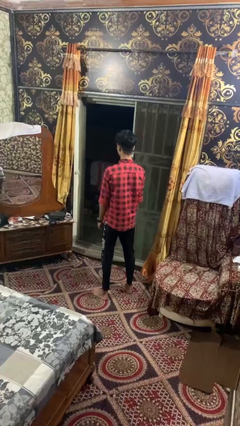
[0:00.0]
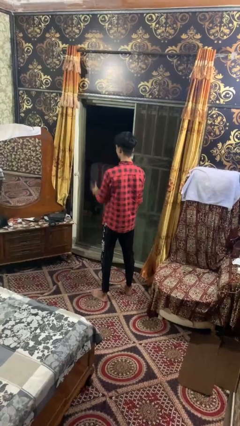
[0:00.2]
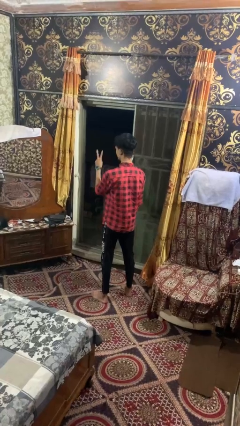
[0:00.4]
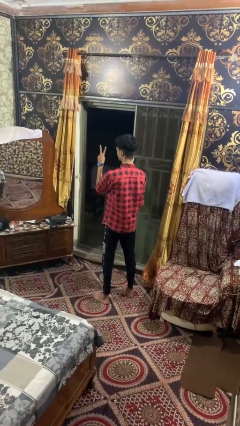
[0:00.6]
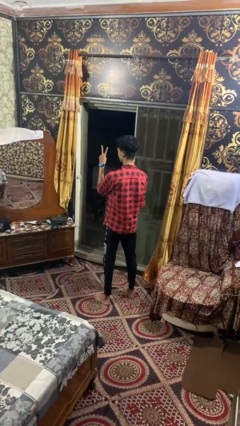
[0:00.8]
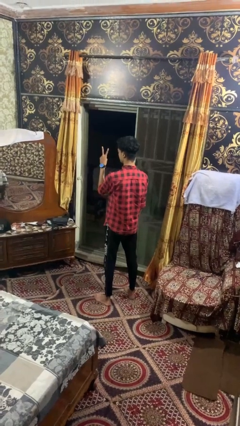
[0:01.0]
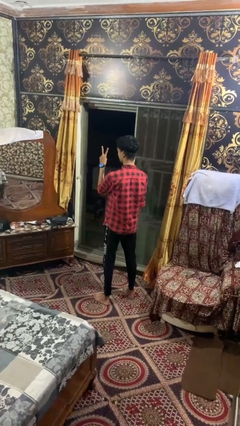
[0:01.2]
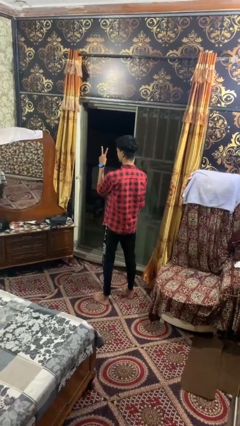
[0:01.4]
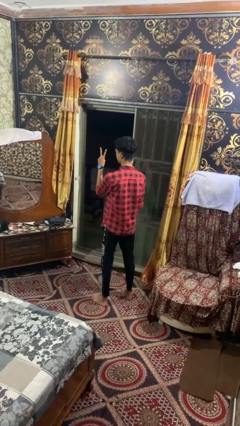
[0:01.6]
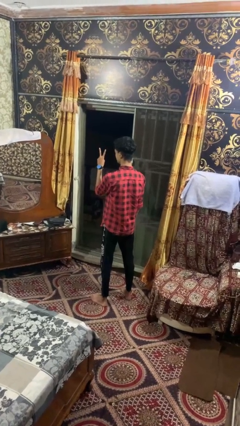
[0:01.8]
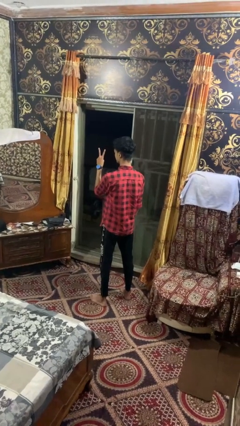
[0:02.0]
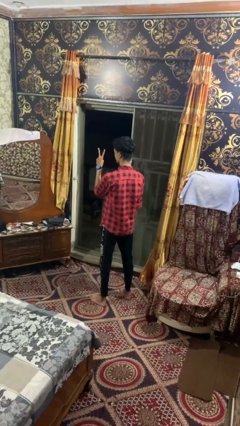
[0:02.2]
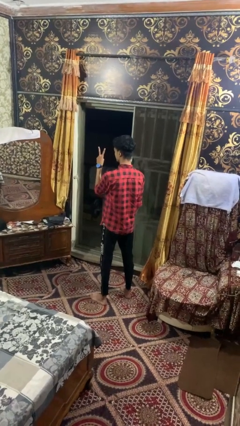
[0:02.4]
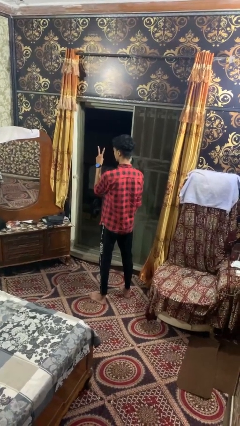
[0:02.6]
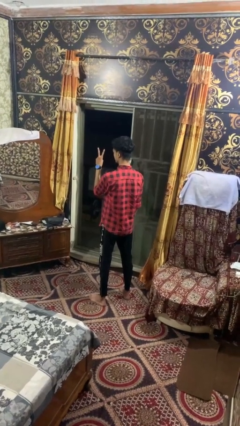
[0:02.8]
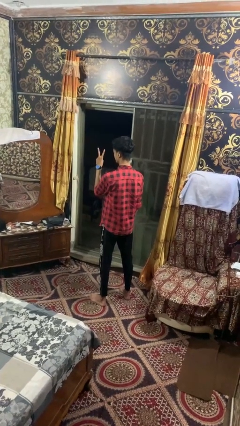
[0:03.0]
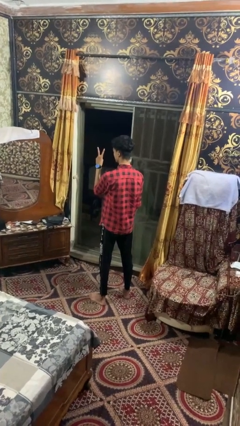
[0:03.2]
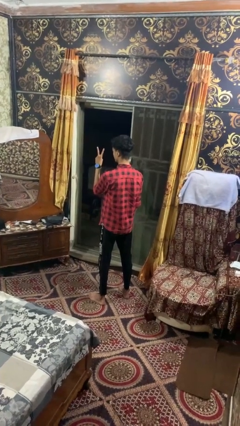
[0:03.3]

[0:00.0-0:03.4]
person gestures peace

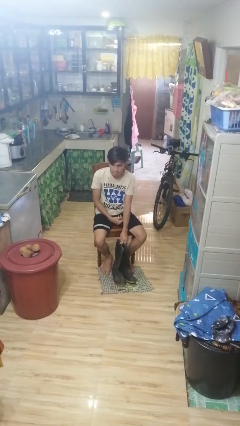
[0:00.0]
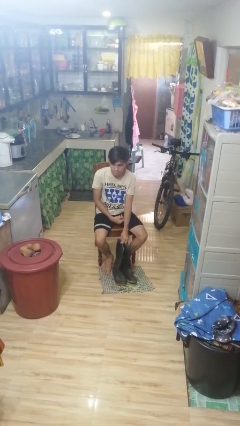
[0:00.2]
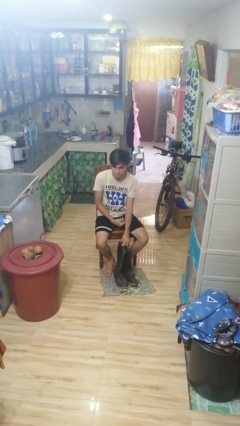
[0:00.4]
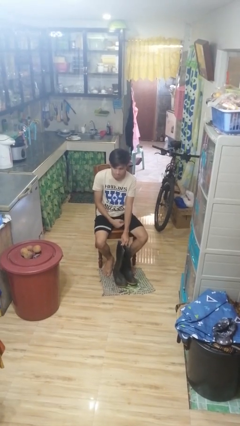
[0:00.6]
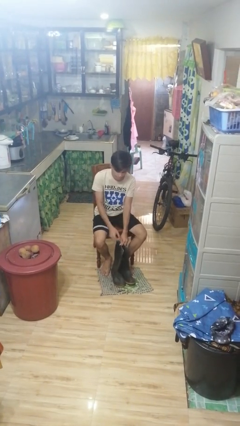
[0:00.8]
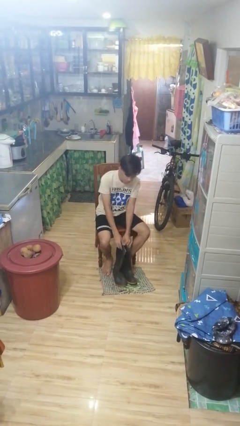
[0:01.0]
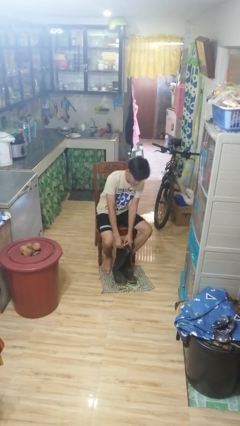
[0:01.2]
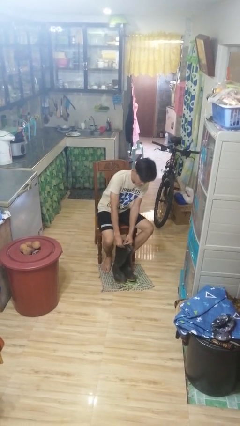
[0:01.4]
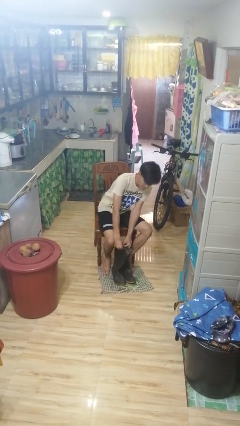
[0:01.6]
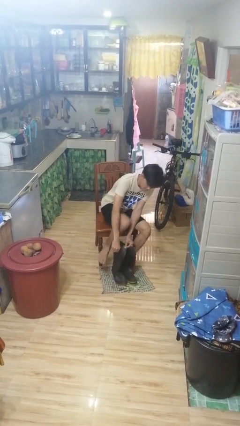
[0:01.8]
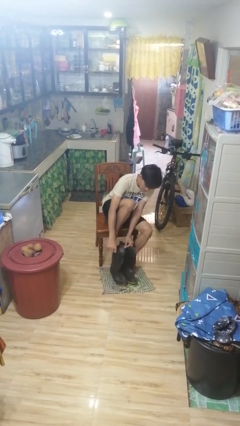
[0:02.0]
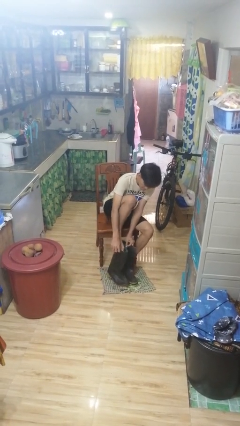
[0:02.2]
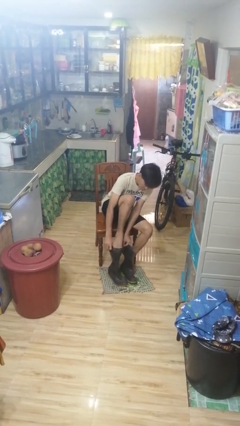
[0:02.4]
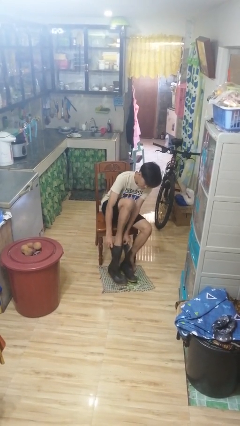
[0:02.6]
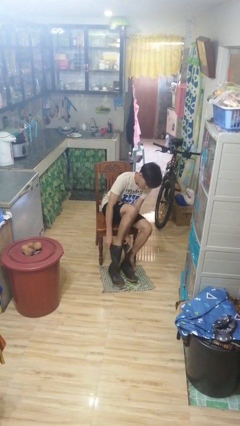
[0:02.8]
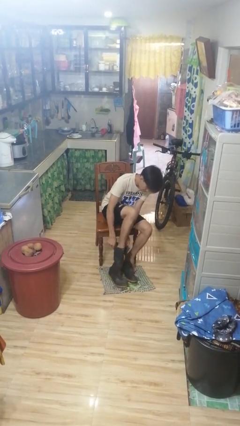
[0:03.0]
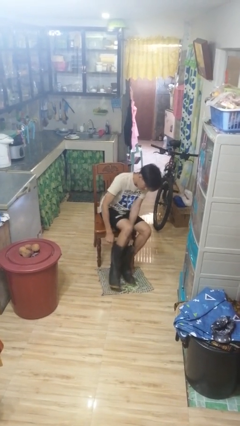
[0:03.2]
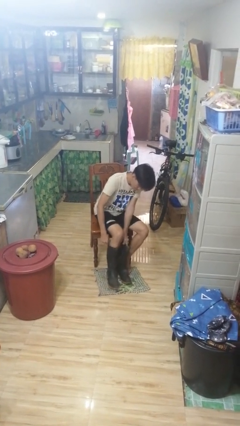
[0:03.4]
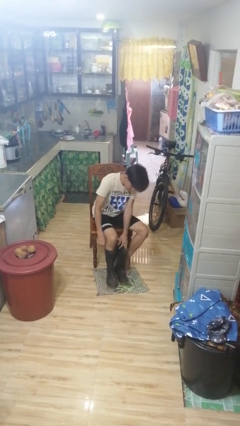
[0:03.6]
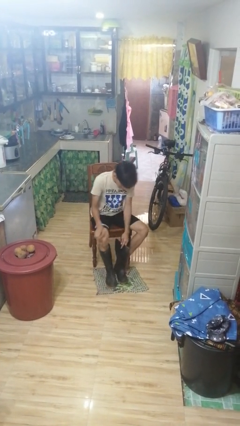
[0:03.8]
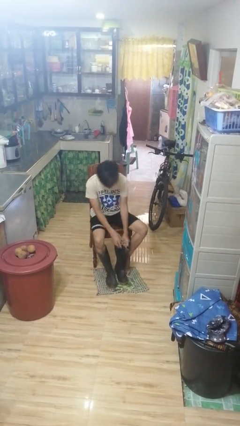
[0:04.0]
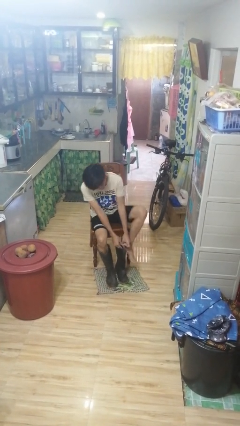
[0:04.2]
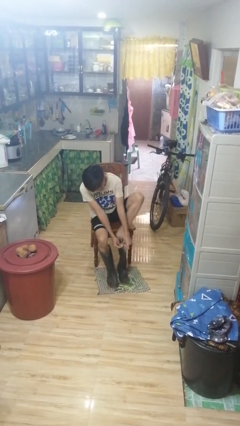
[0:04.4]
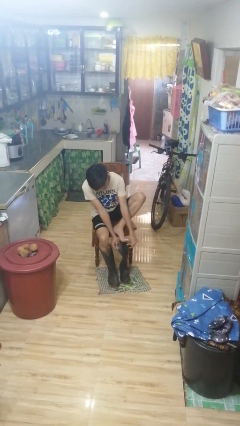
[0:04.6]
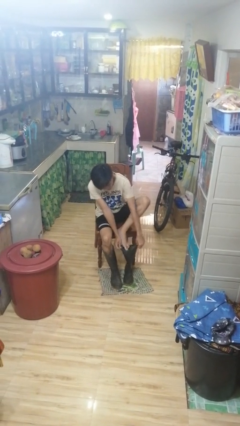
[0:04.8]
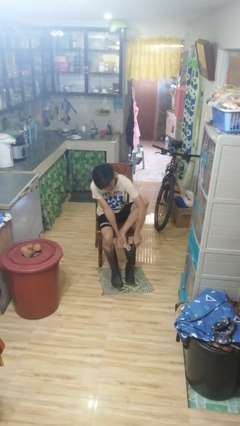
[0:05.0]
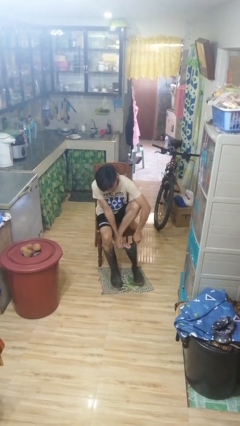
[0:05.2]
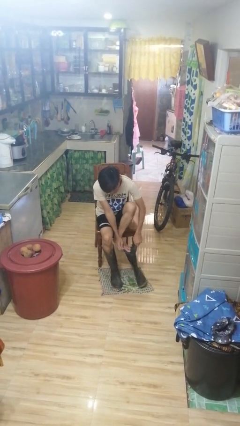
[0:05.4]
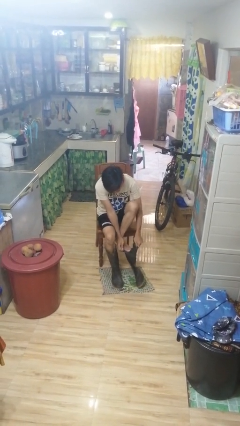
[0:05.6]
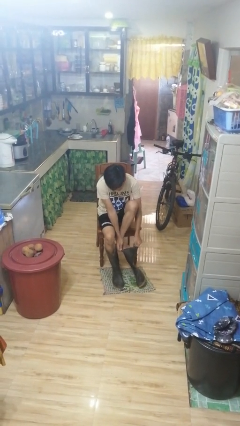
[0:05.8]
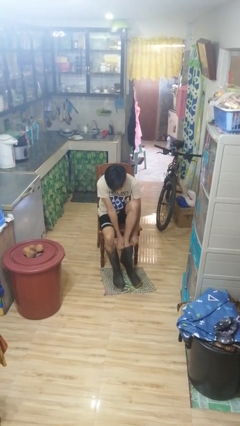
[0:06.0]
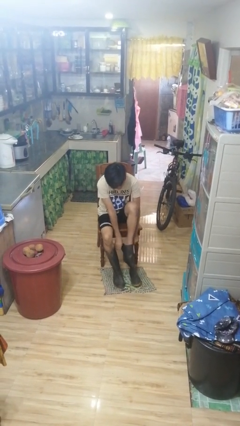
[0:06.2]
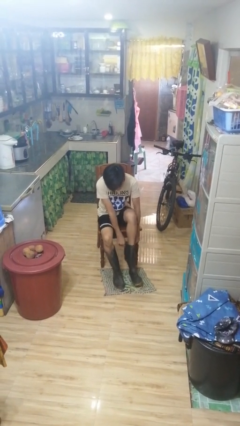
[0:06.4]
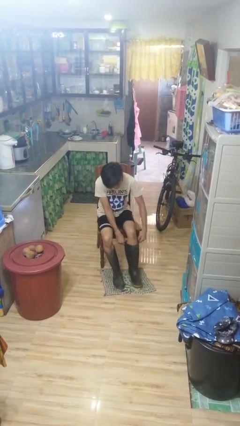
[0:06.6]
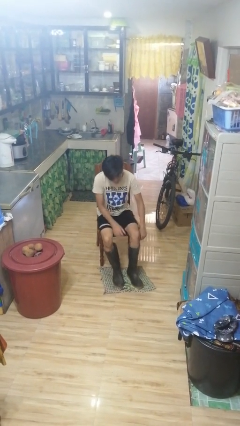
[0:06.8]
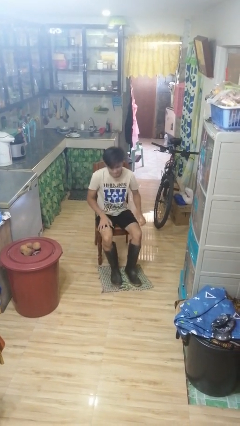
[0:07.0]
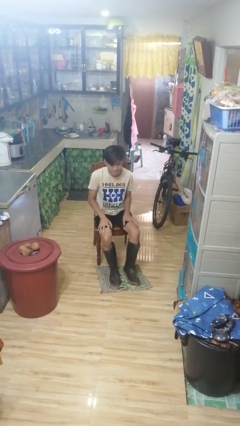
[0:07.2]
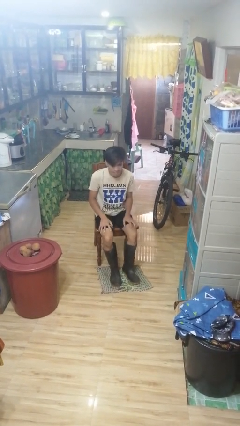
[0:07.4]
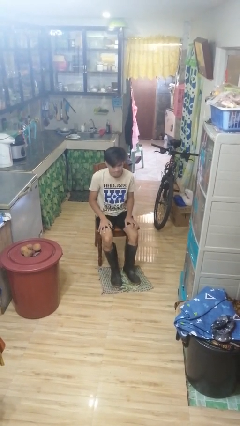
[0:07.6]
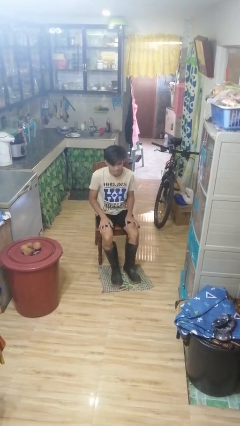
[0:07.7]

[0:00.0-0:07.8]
person puts on boots

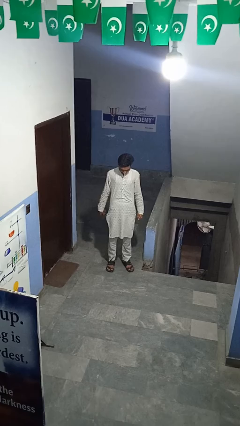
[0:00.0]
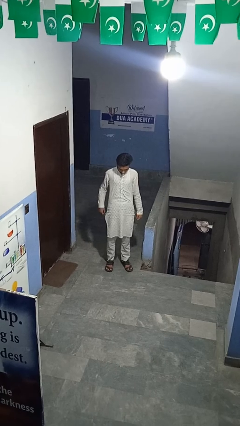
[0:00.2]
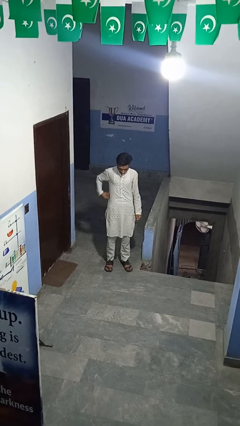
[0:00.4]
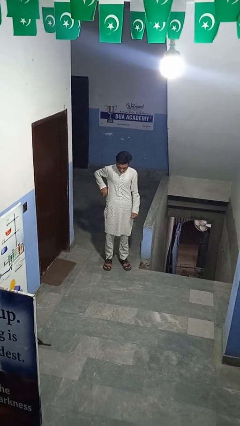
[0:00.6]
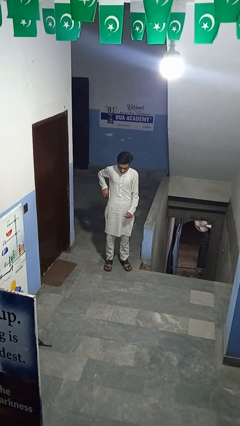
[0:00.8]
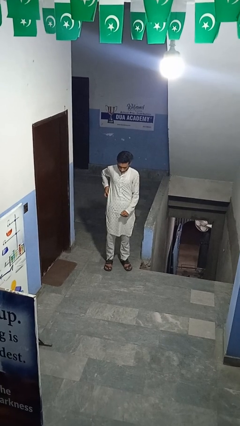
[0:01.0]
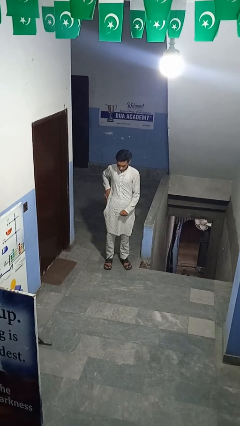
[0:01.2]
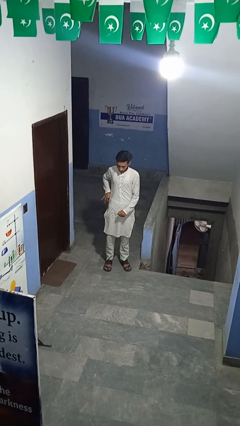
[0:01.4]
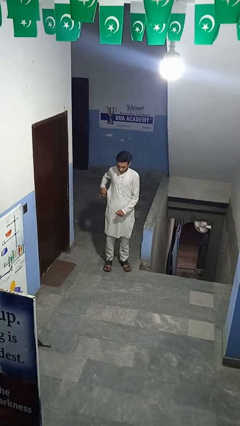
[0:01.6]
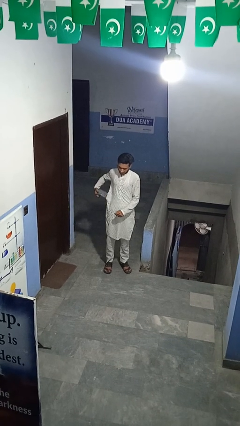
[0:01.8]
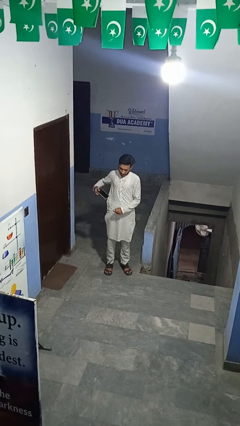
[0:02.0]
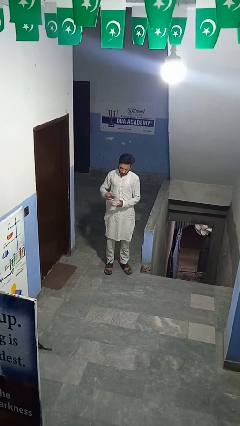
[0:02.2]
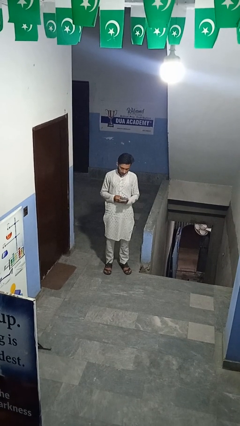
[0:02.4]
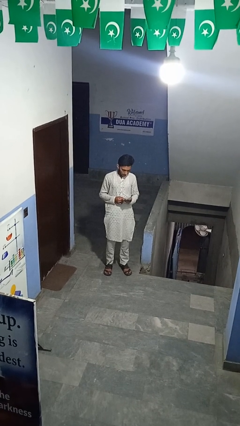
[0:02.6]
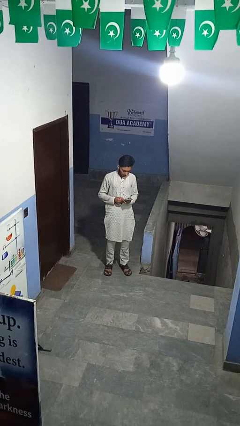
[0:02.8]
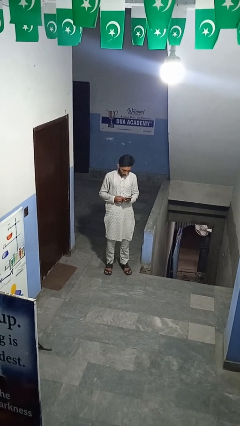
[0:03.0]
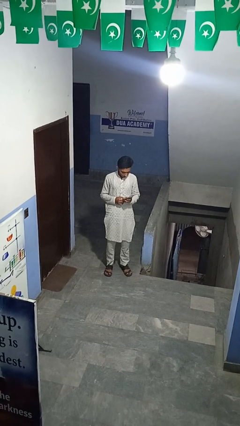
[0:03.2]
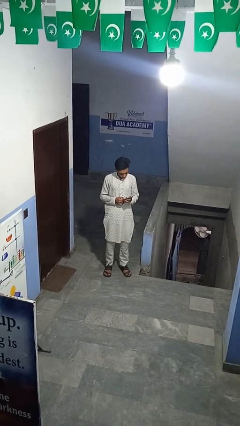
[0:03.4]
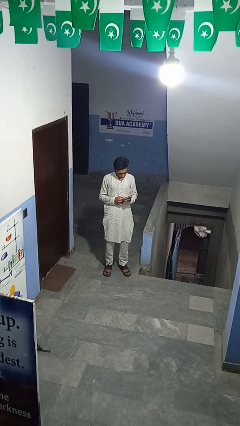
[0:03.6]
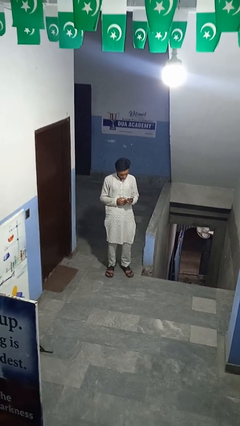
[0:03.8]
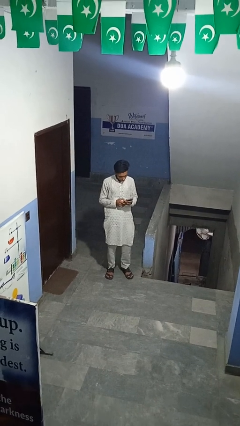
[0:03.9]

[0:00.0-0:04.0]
person puts hands in back pockets

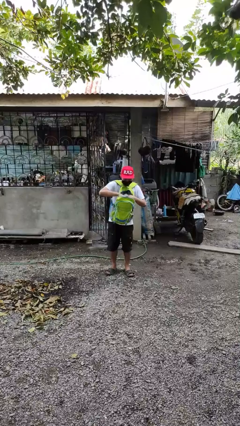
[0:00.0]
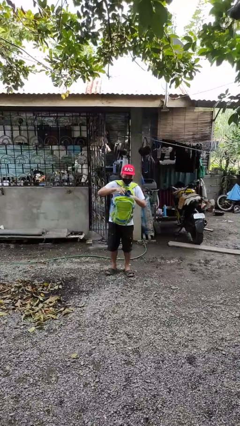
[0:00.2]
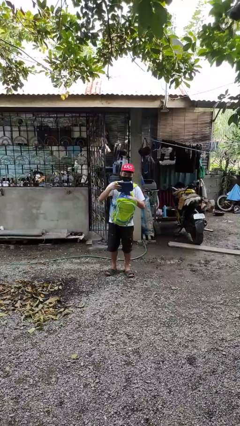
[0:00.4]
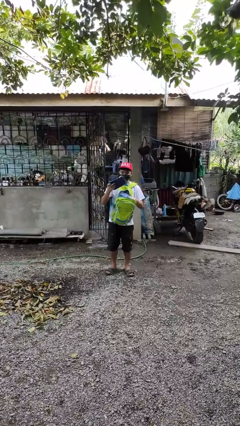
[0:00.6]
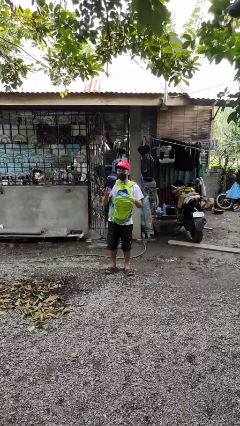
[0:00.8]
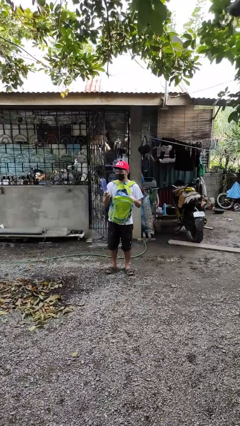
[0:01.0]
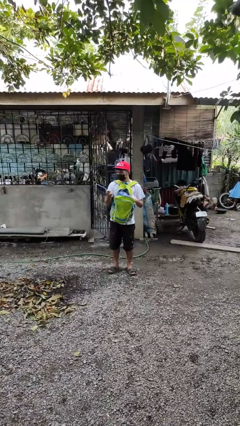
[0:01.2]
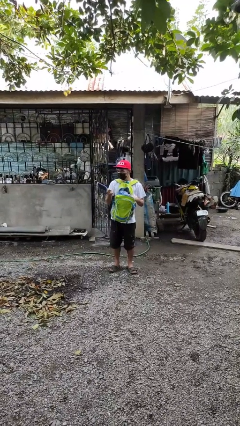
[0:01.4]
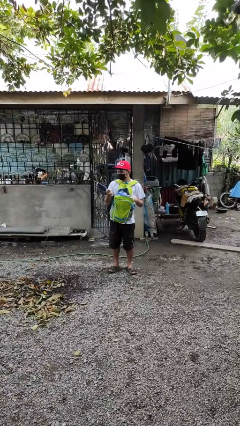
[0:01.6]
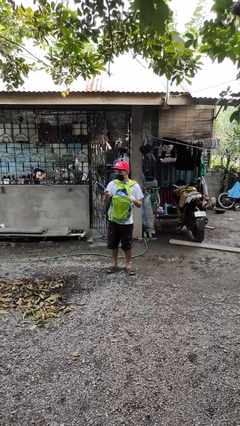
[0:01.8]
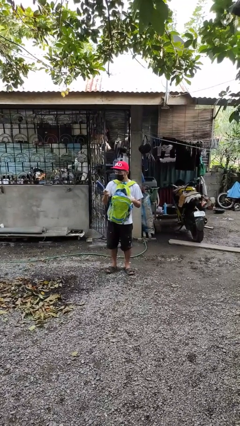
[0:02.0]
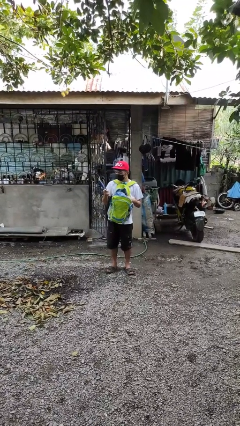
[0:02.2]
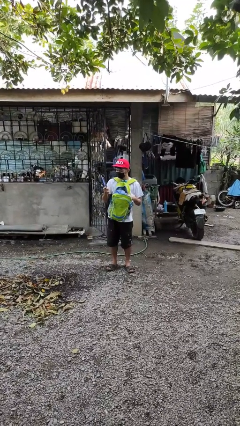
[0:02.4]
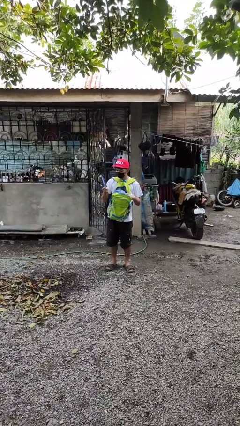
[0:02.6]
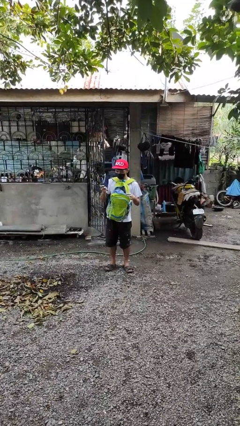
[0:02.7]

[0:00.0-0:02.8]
person takes object from backpack
